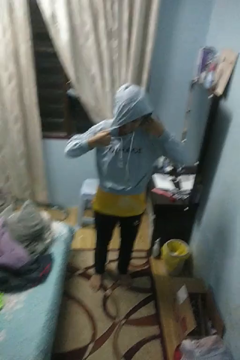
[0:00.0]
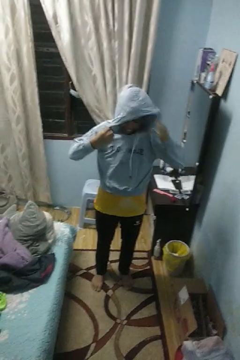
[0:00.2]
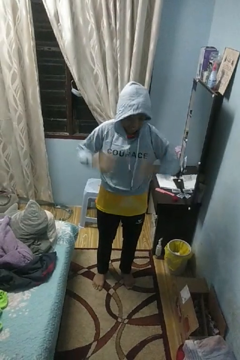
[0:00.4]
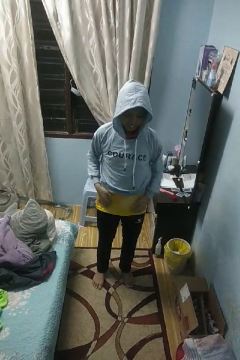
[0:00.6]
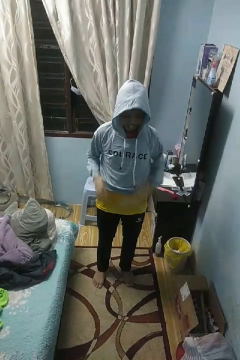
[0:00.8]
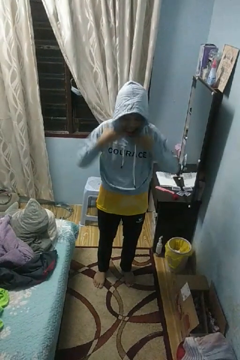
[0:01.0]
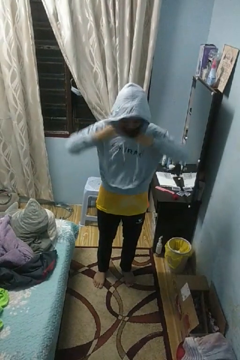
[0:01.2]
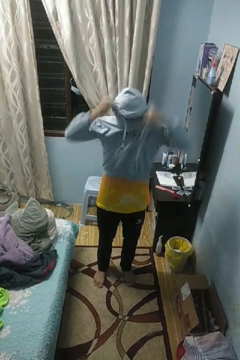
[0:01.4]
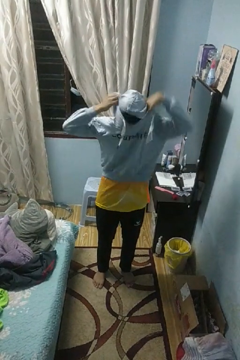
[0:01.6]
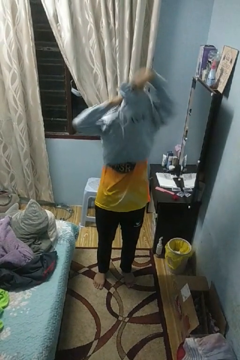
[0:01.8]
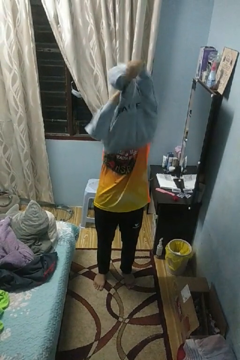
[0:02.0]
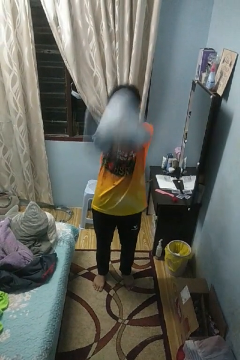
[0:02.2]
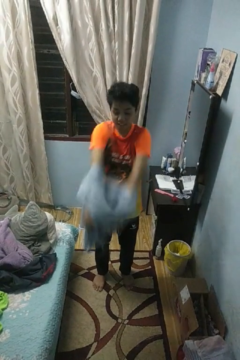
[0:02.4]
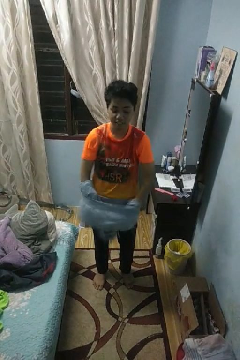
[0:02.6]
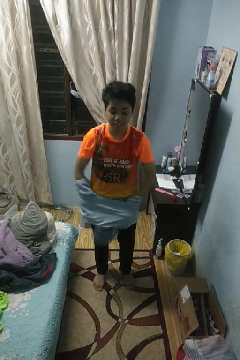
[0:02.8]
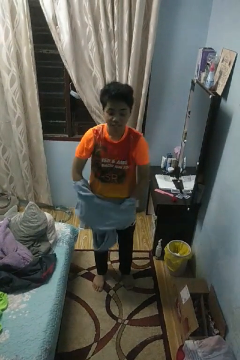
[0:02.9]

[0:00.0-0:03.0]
person takes off hoodie

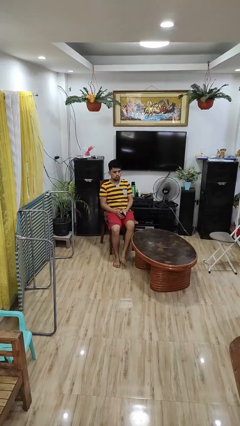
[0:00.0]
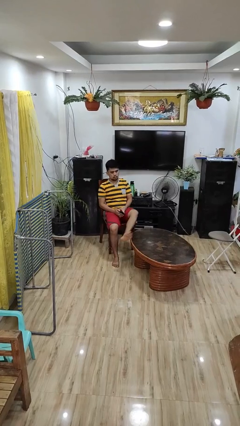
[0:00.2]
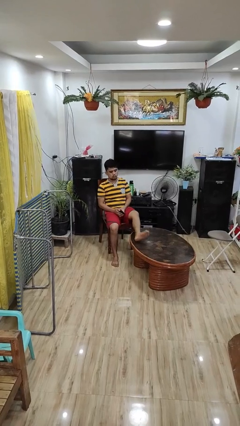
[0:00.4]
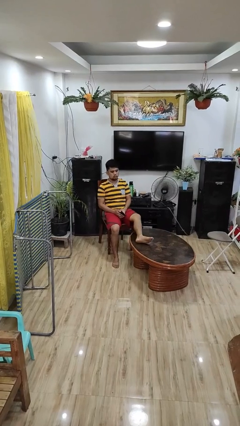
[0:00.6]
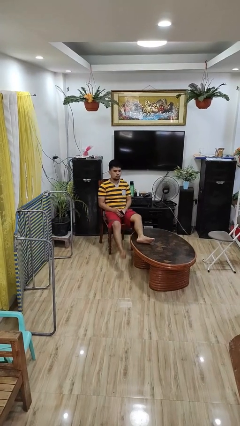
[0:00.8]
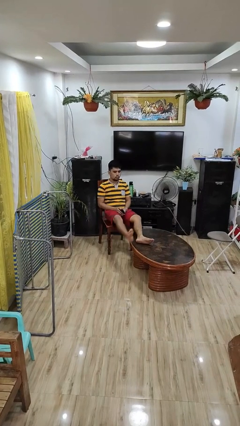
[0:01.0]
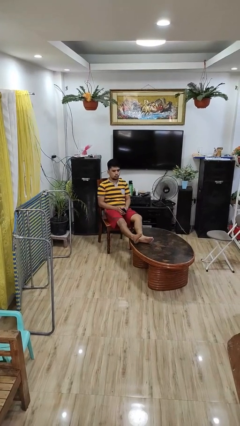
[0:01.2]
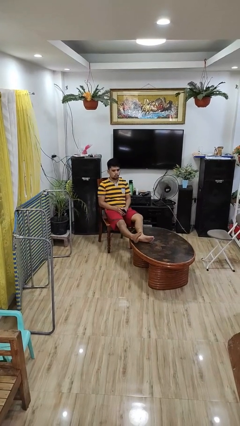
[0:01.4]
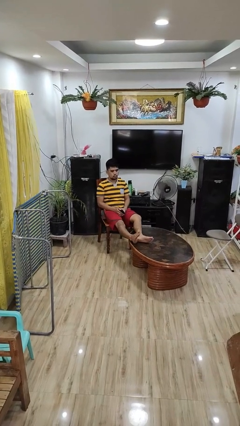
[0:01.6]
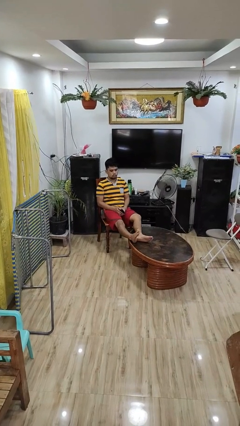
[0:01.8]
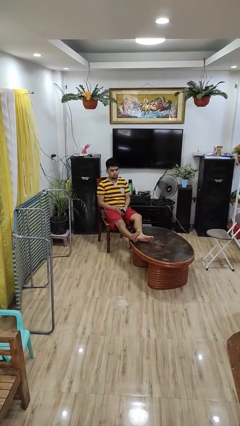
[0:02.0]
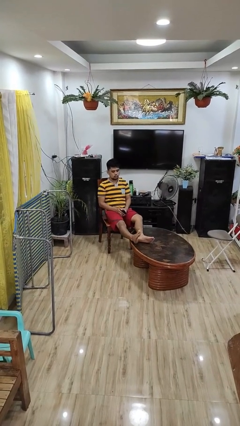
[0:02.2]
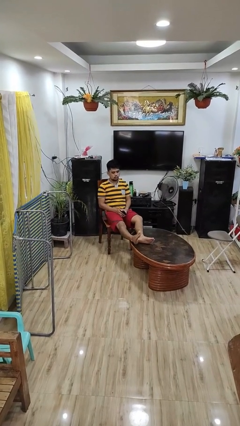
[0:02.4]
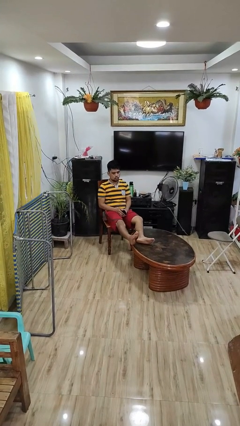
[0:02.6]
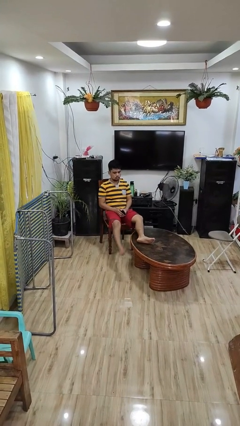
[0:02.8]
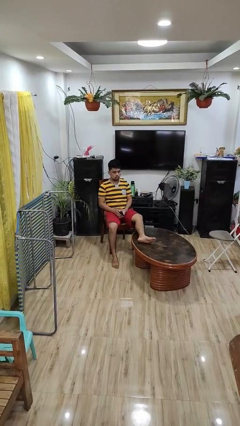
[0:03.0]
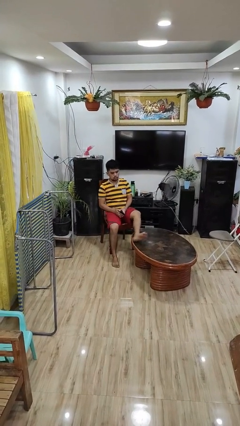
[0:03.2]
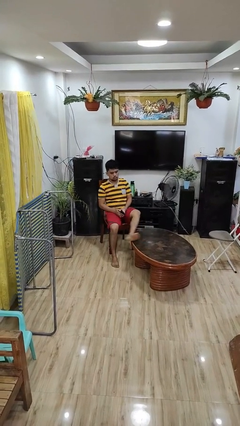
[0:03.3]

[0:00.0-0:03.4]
person puts feet up

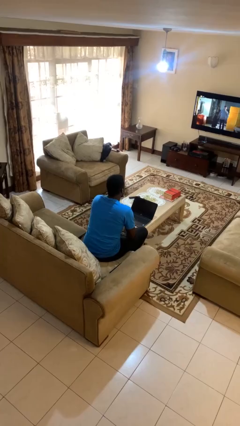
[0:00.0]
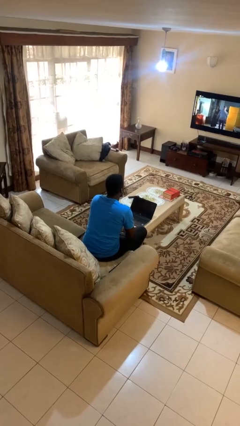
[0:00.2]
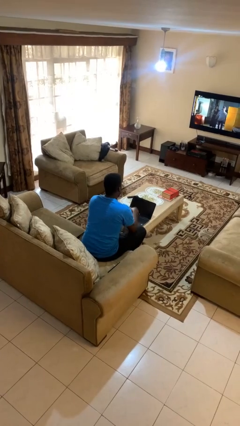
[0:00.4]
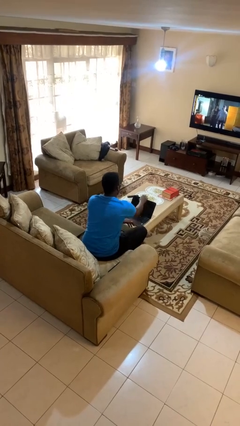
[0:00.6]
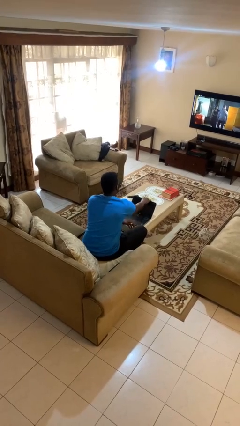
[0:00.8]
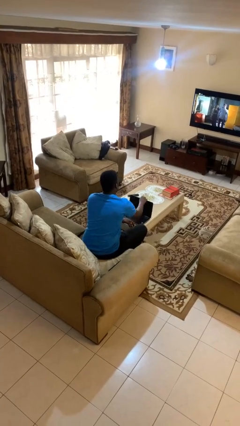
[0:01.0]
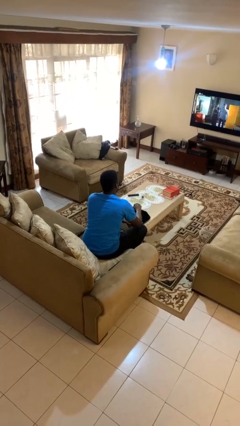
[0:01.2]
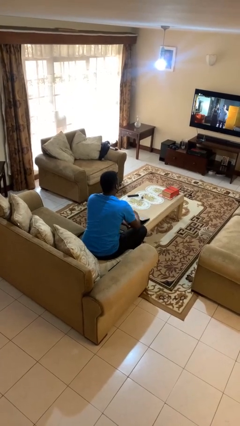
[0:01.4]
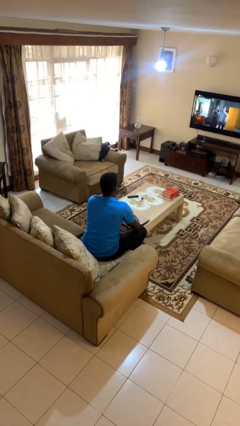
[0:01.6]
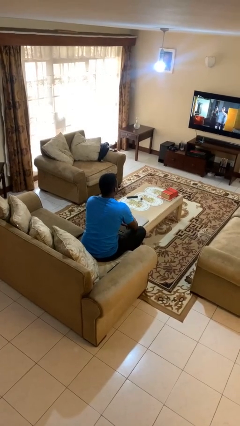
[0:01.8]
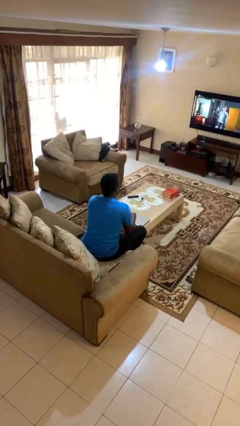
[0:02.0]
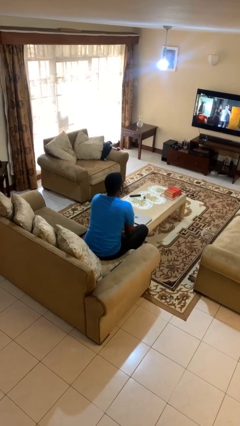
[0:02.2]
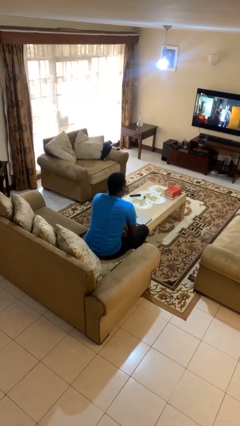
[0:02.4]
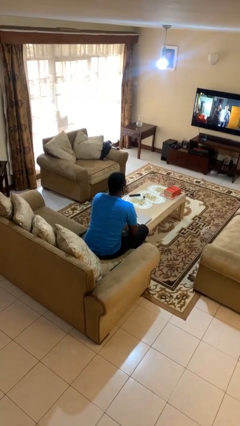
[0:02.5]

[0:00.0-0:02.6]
person closes laptop

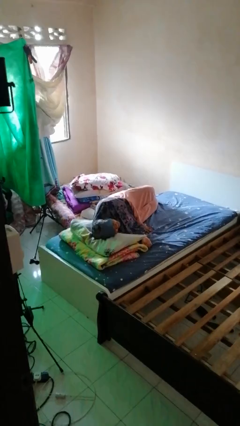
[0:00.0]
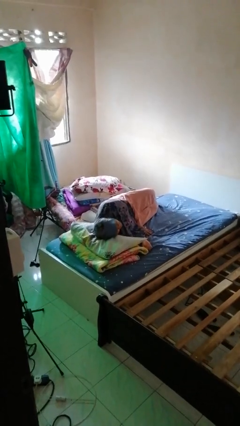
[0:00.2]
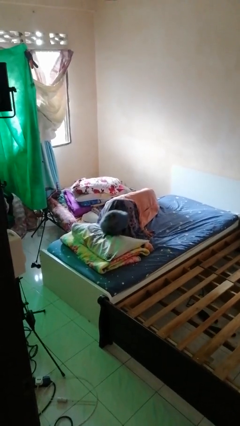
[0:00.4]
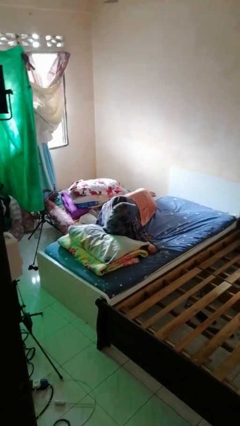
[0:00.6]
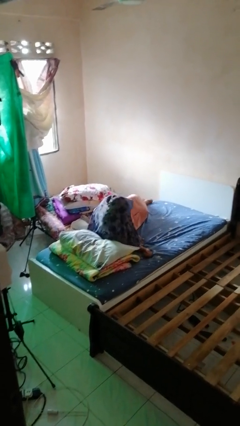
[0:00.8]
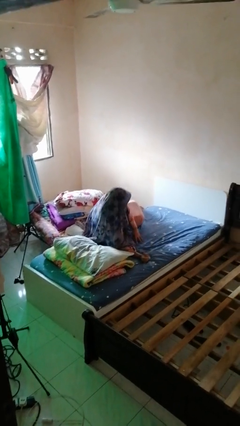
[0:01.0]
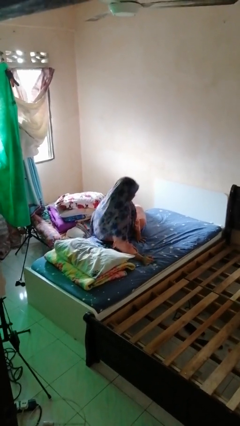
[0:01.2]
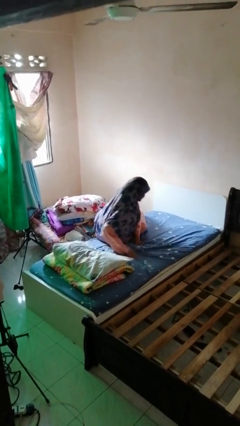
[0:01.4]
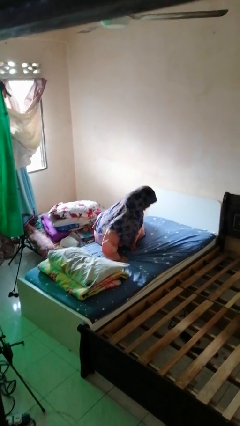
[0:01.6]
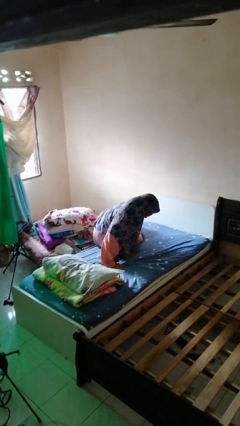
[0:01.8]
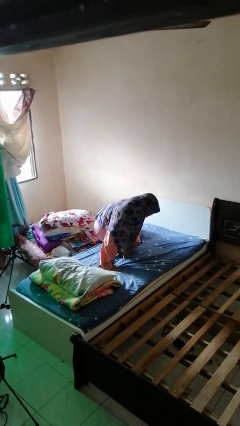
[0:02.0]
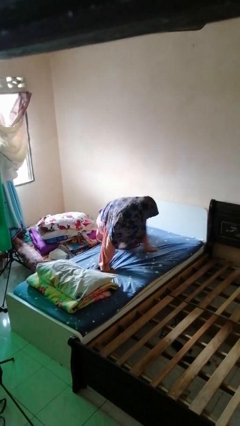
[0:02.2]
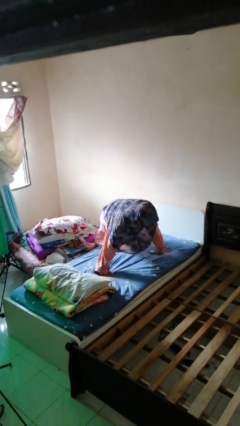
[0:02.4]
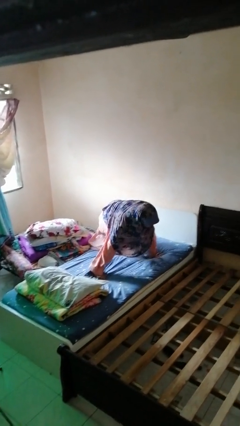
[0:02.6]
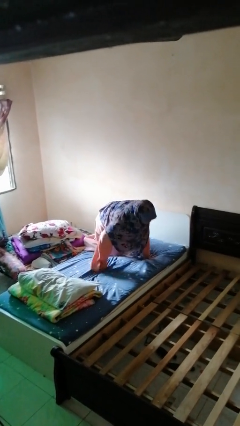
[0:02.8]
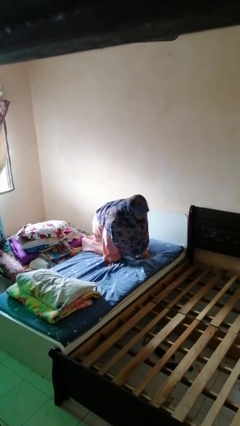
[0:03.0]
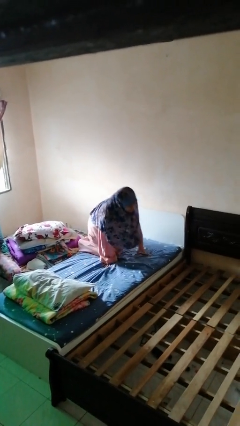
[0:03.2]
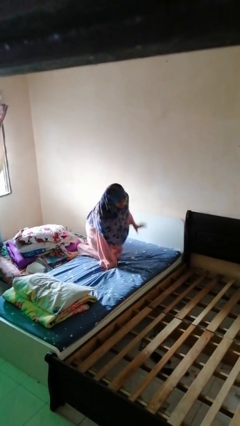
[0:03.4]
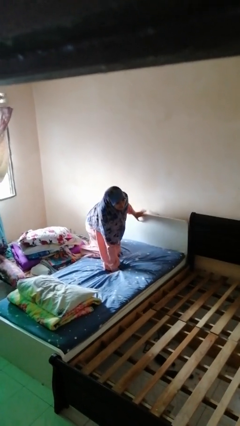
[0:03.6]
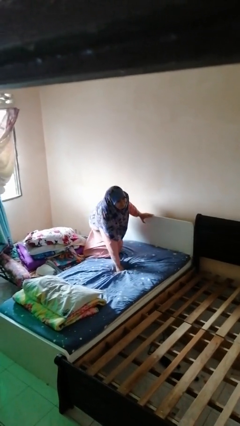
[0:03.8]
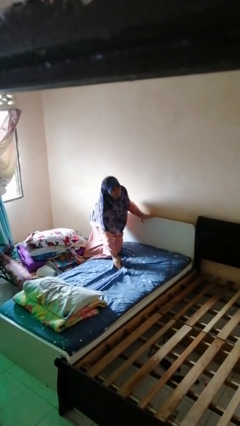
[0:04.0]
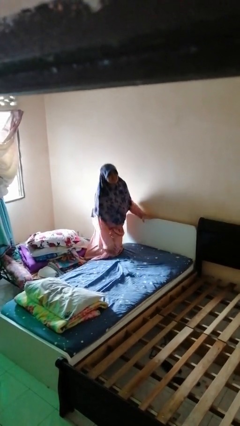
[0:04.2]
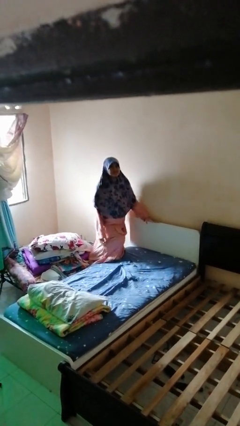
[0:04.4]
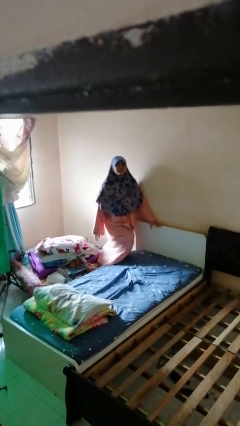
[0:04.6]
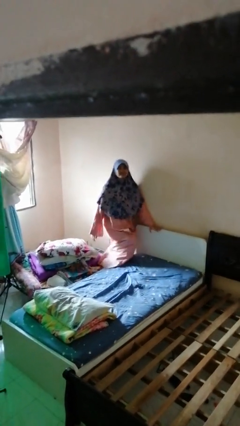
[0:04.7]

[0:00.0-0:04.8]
person stands up

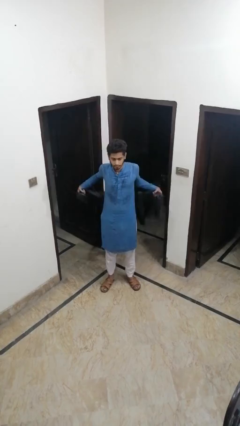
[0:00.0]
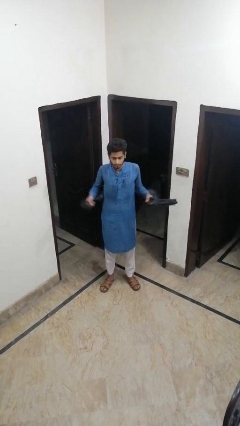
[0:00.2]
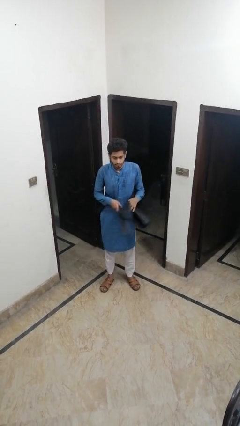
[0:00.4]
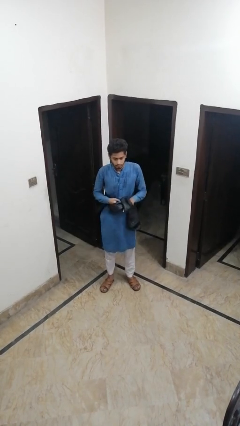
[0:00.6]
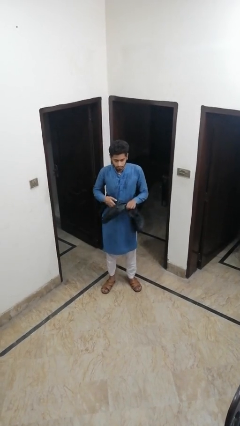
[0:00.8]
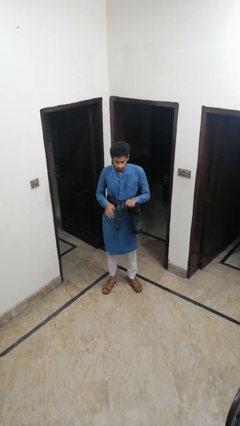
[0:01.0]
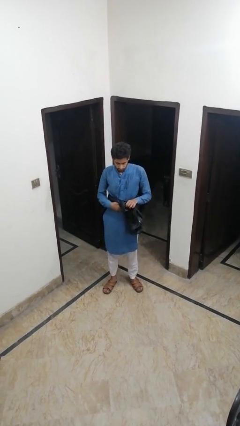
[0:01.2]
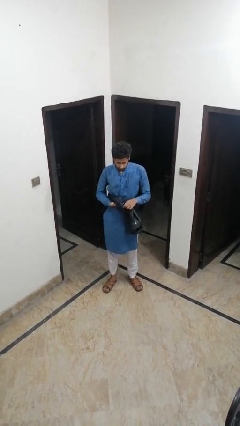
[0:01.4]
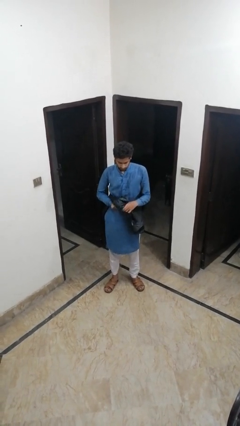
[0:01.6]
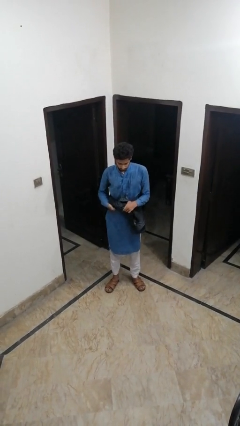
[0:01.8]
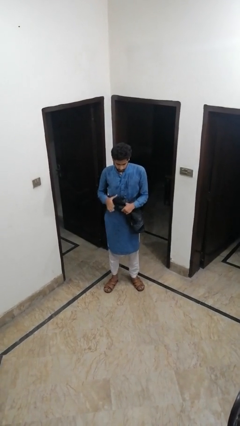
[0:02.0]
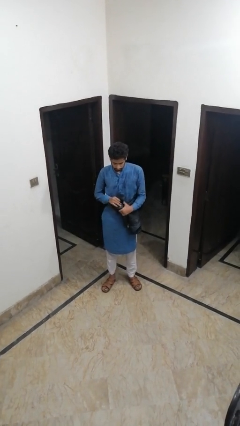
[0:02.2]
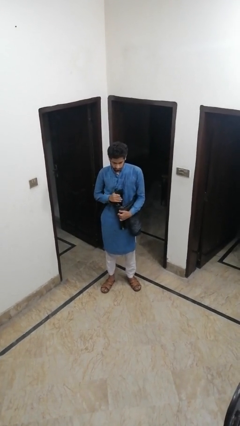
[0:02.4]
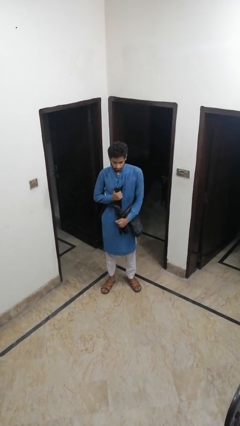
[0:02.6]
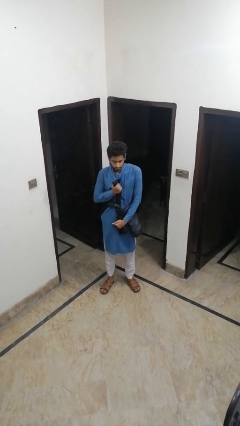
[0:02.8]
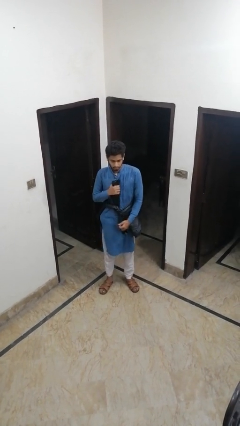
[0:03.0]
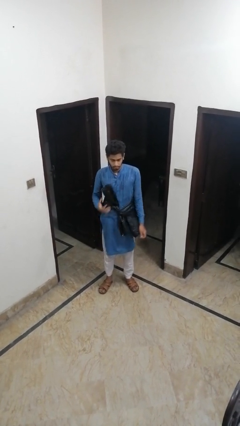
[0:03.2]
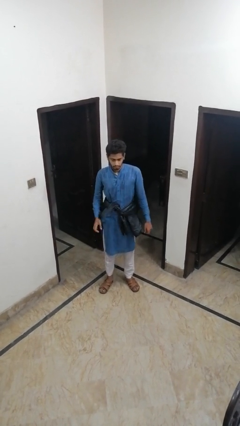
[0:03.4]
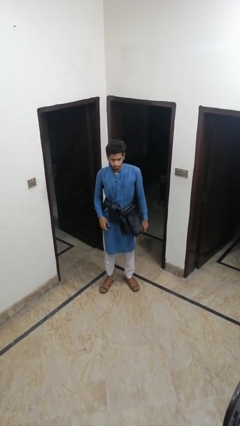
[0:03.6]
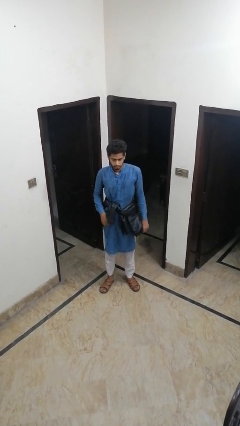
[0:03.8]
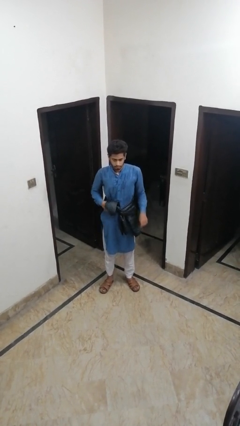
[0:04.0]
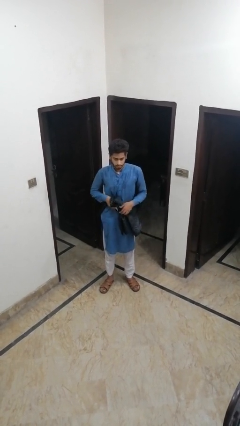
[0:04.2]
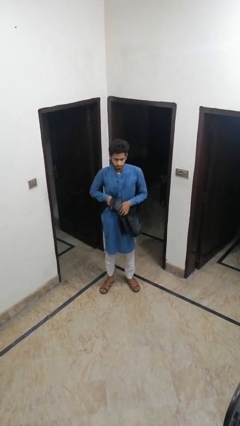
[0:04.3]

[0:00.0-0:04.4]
person ties jacket around waist
